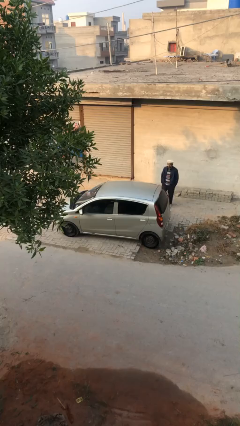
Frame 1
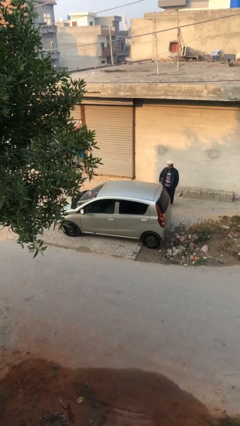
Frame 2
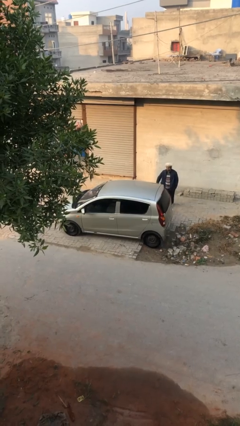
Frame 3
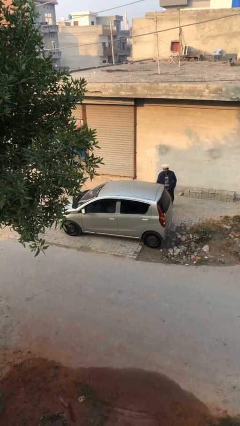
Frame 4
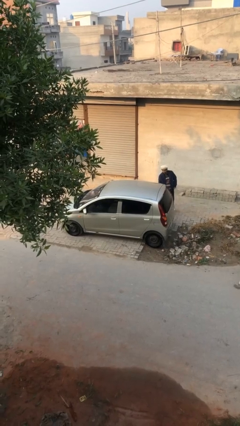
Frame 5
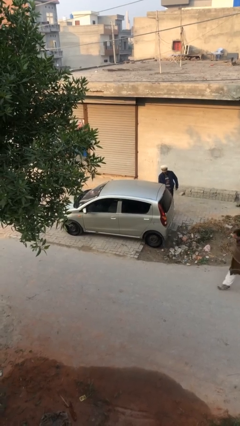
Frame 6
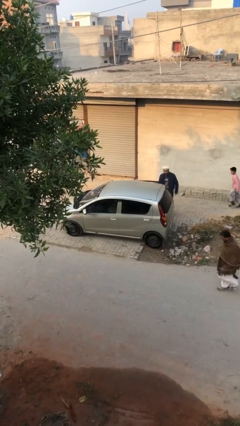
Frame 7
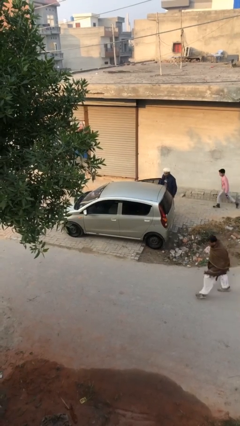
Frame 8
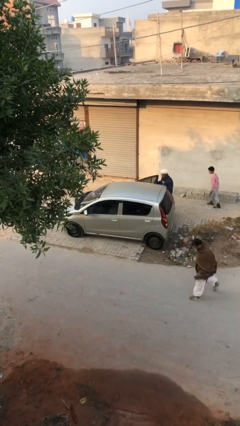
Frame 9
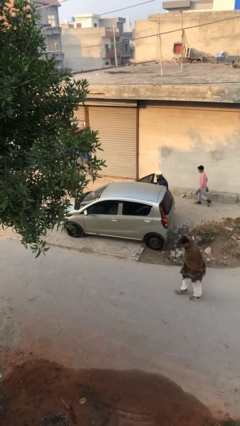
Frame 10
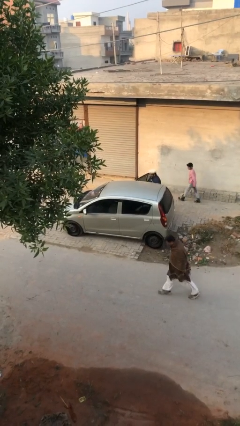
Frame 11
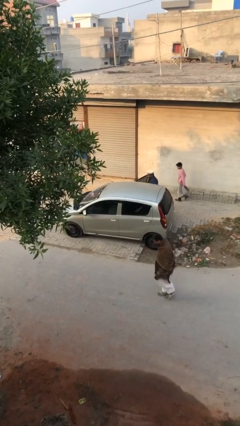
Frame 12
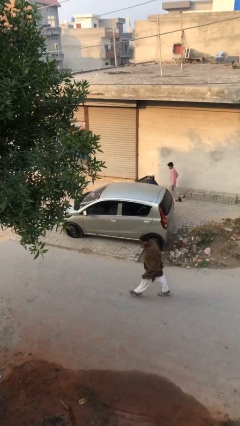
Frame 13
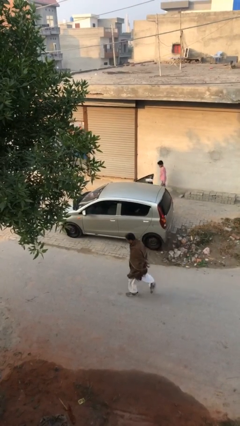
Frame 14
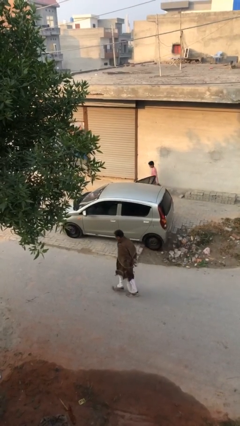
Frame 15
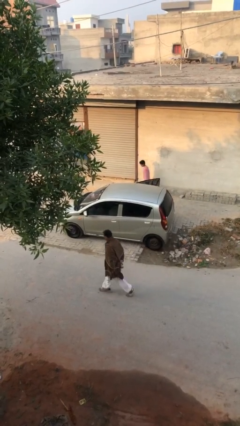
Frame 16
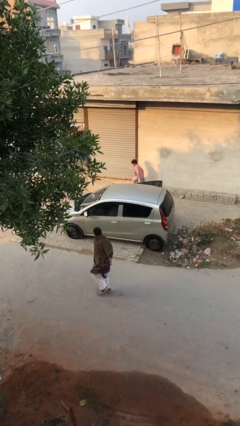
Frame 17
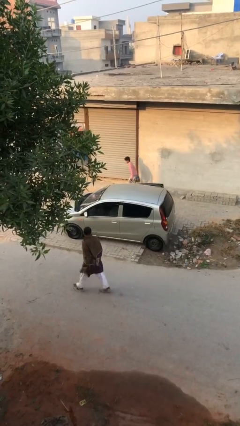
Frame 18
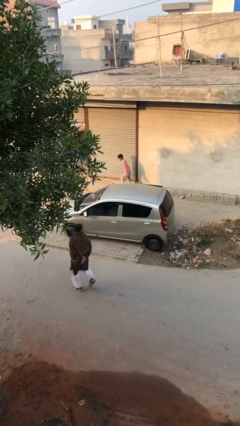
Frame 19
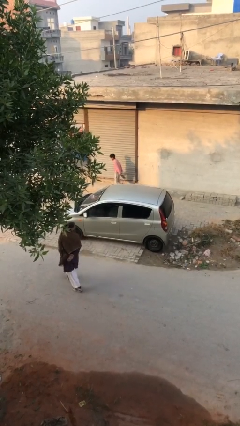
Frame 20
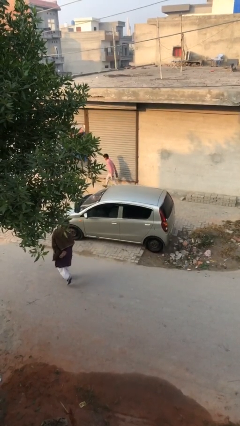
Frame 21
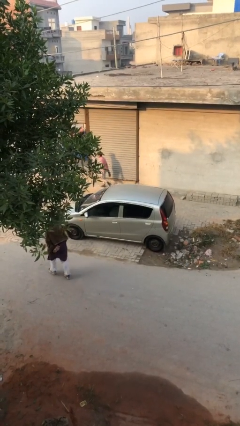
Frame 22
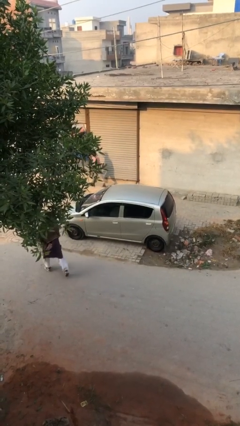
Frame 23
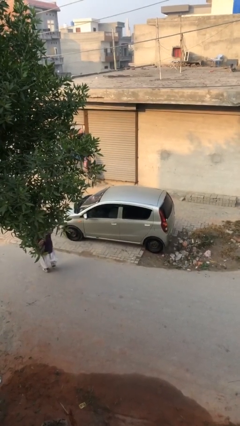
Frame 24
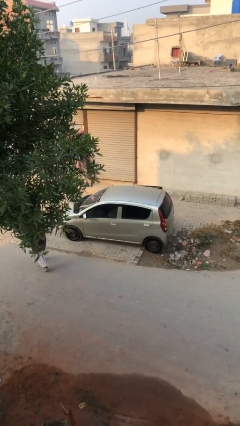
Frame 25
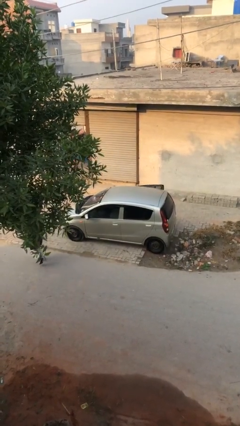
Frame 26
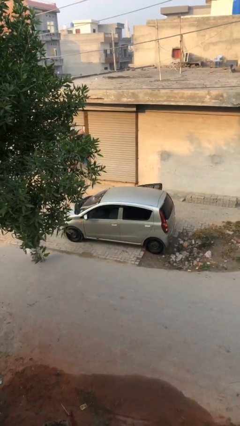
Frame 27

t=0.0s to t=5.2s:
car picks up person

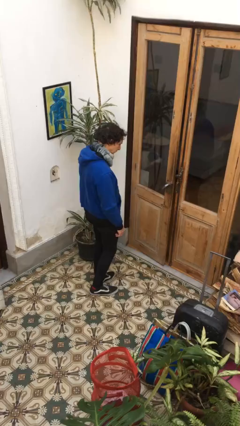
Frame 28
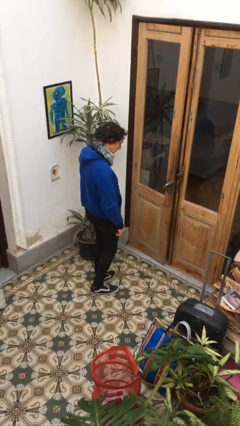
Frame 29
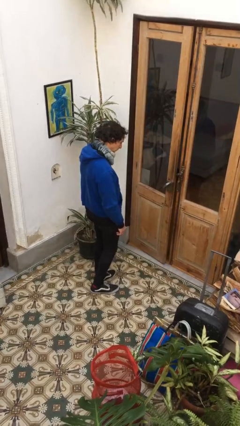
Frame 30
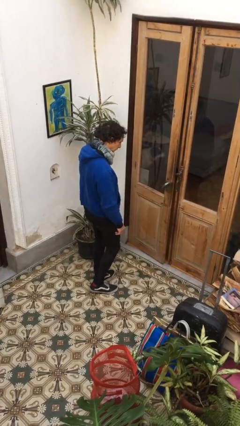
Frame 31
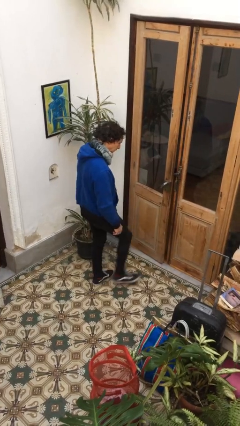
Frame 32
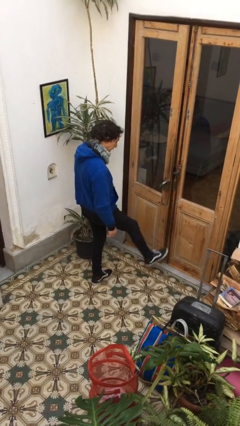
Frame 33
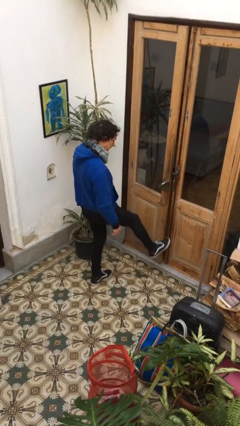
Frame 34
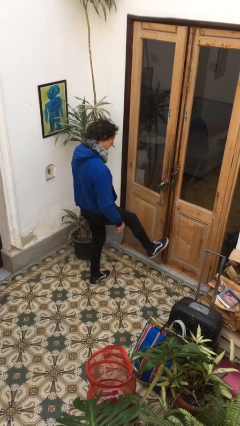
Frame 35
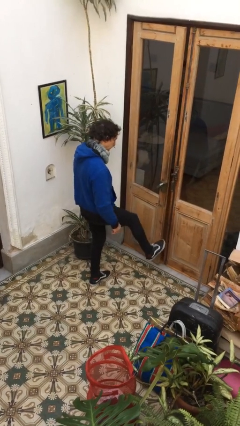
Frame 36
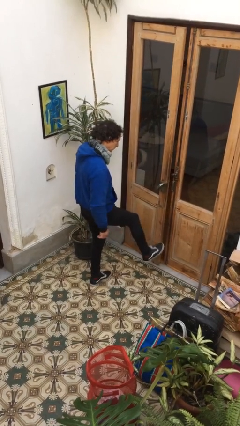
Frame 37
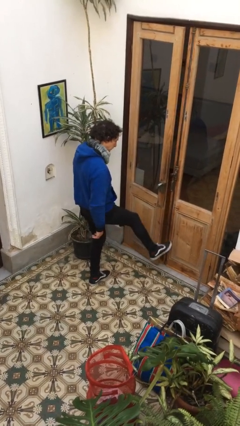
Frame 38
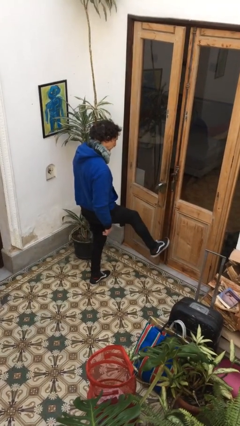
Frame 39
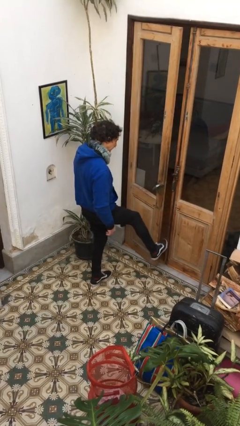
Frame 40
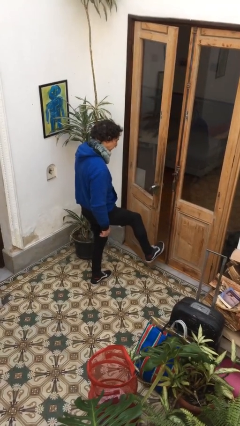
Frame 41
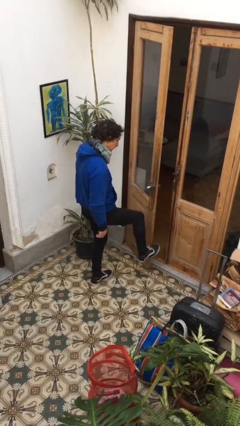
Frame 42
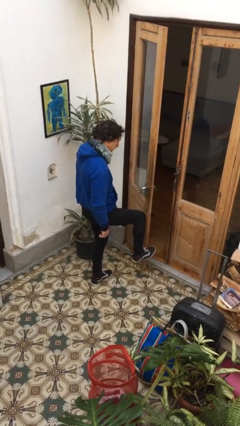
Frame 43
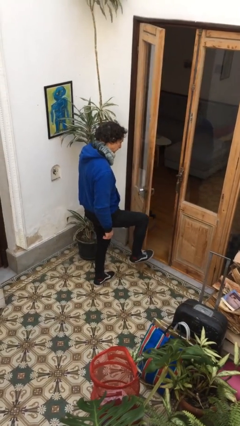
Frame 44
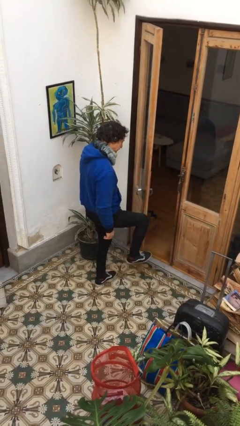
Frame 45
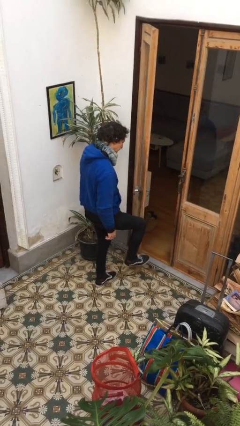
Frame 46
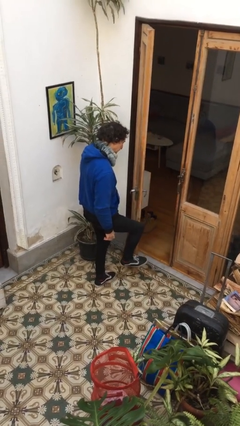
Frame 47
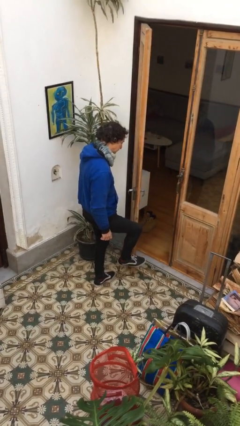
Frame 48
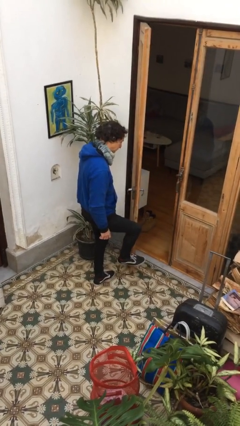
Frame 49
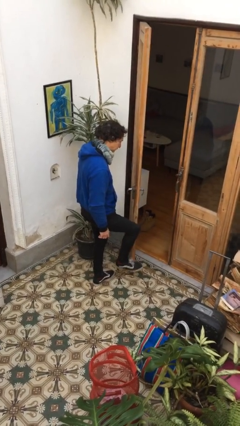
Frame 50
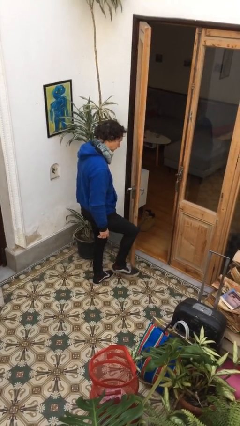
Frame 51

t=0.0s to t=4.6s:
person opens facility door

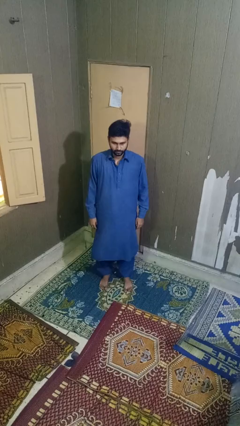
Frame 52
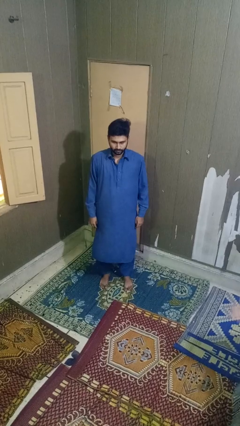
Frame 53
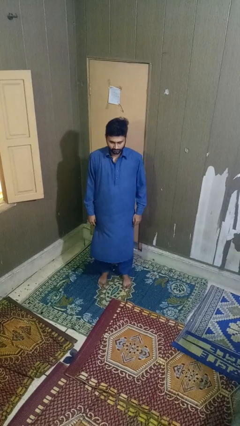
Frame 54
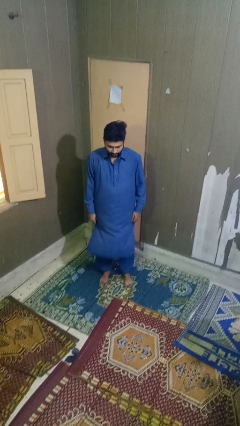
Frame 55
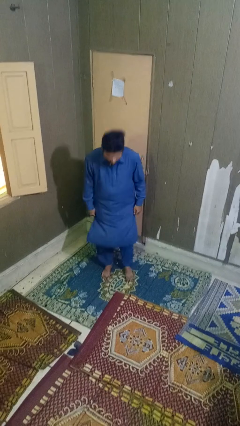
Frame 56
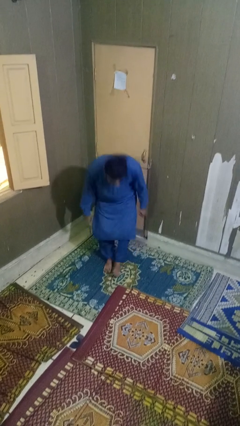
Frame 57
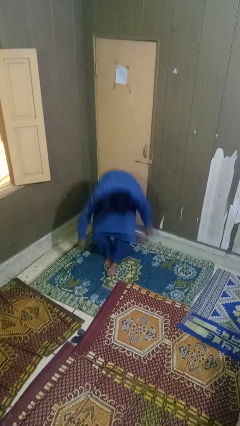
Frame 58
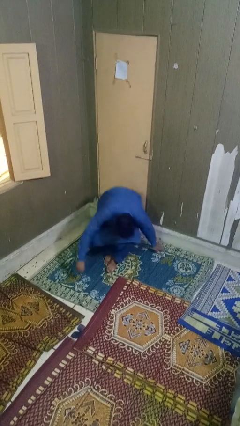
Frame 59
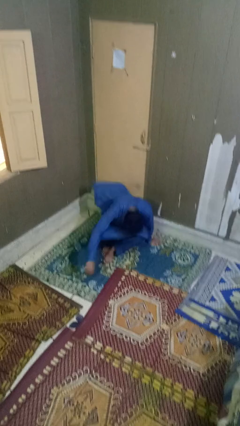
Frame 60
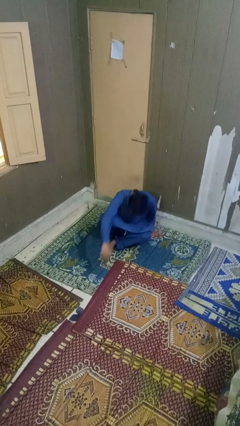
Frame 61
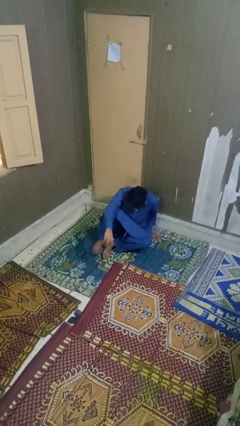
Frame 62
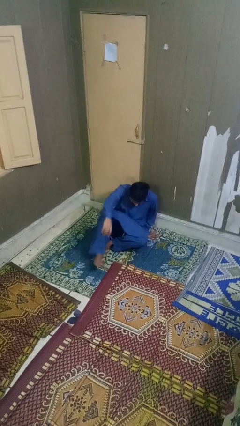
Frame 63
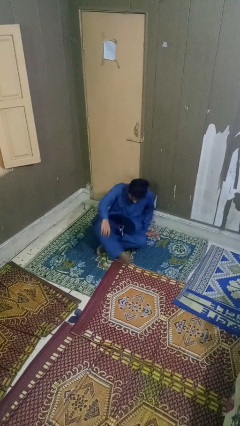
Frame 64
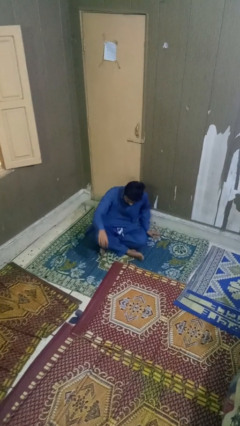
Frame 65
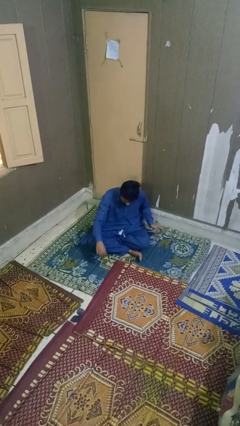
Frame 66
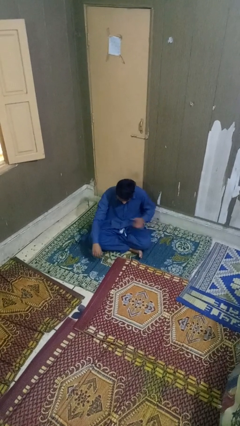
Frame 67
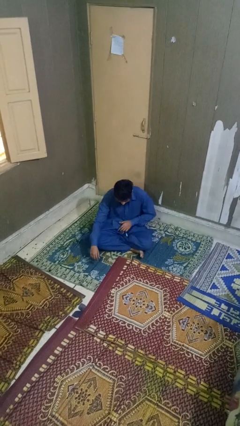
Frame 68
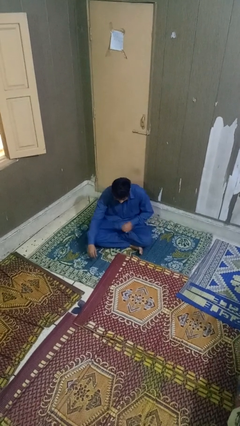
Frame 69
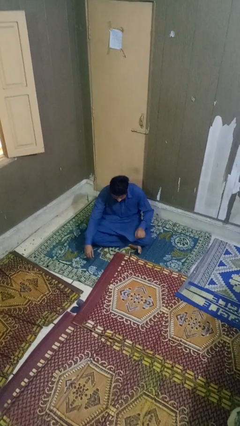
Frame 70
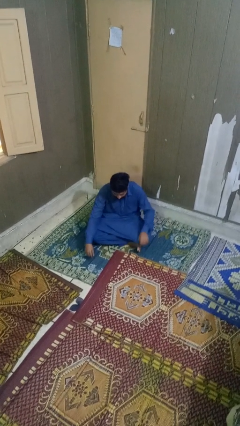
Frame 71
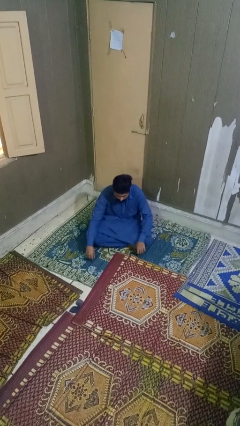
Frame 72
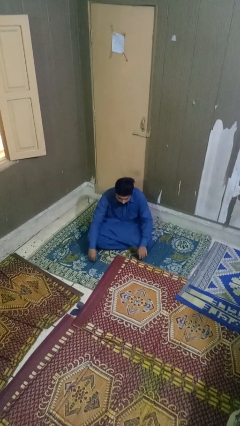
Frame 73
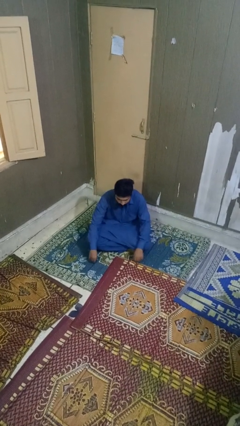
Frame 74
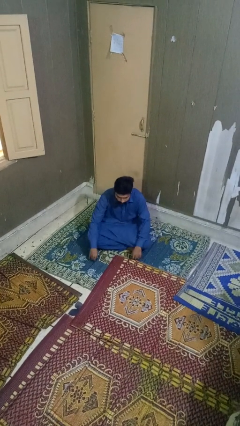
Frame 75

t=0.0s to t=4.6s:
person sits crisscross

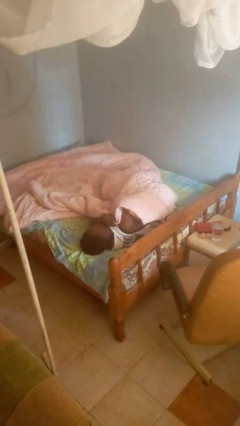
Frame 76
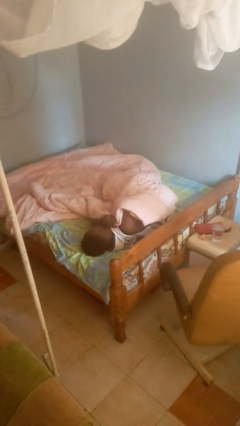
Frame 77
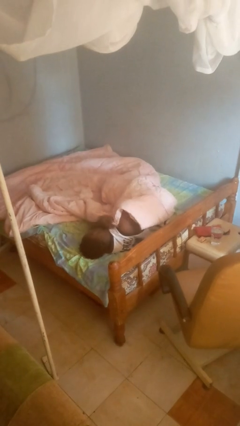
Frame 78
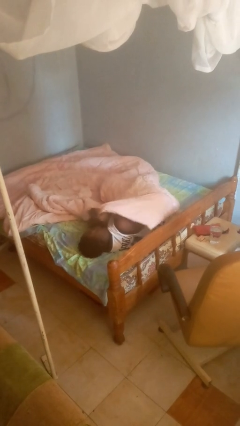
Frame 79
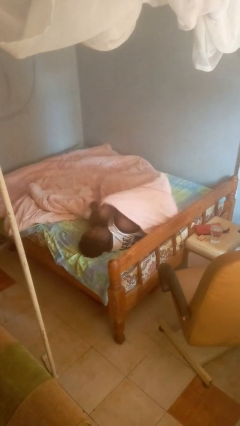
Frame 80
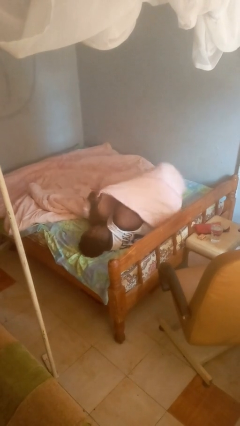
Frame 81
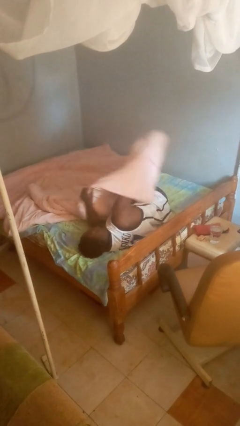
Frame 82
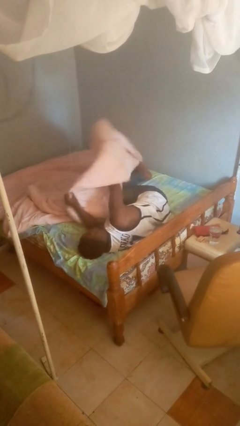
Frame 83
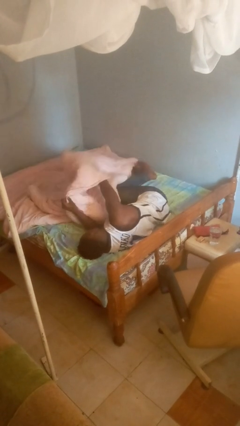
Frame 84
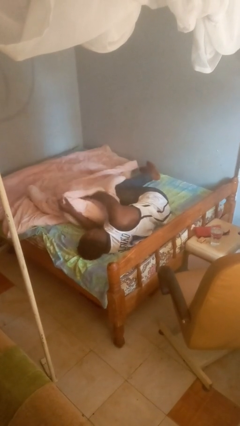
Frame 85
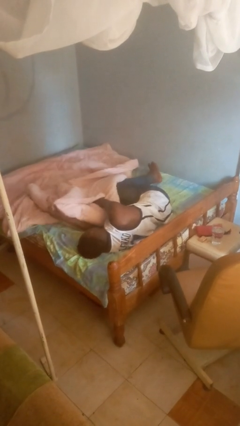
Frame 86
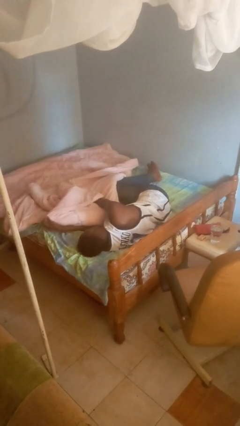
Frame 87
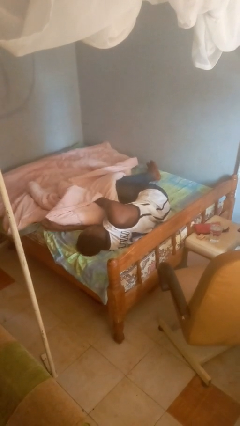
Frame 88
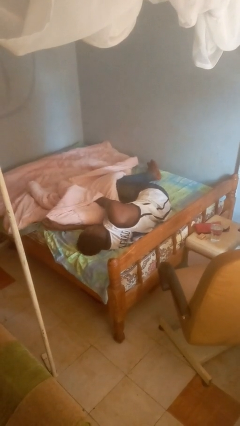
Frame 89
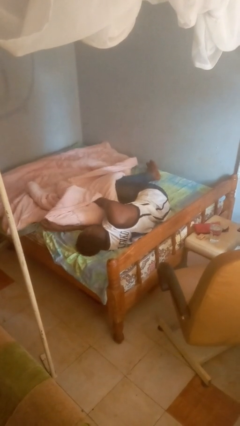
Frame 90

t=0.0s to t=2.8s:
person uncovers with blanket

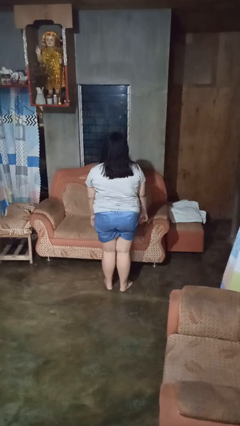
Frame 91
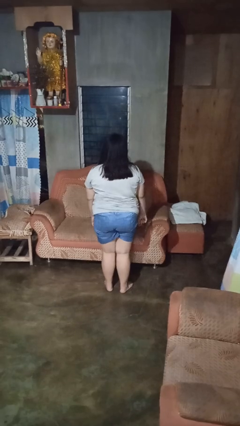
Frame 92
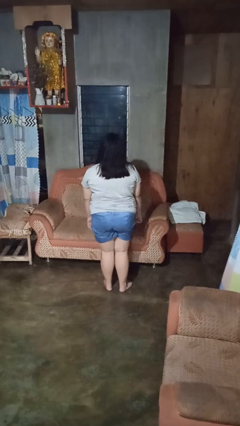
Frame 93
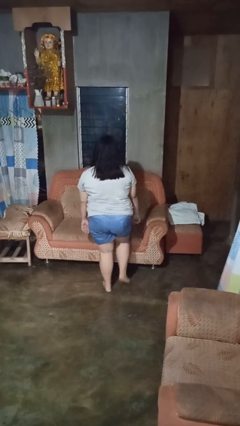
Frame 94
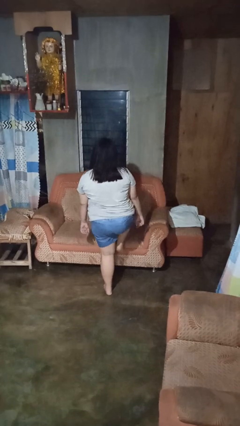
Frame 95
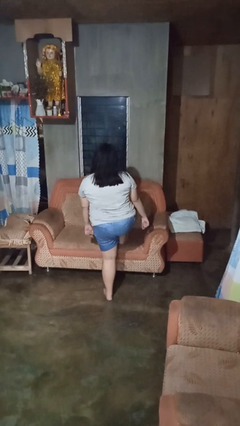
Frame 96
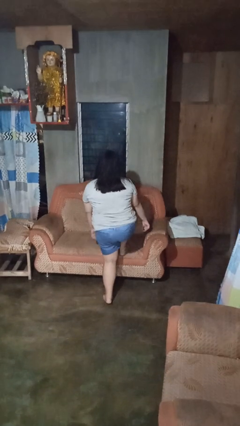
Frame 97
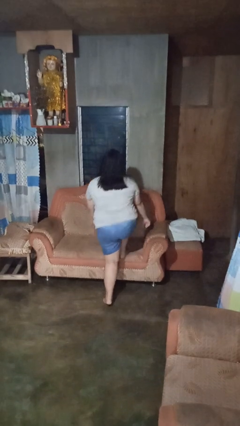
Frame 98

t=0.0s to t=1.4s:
person climbs on couch
